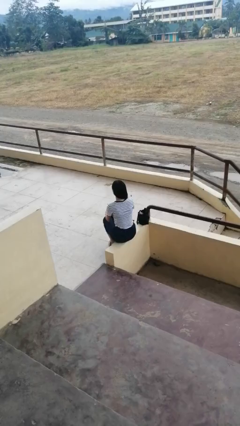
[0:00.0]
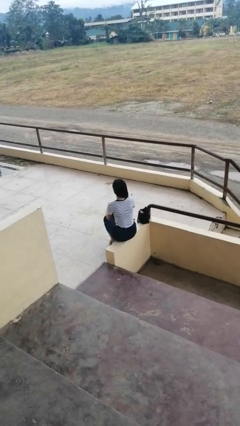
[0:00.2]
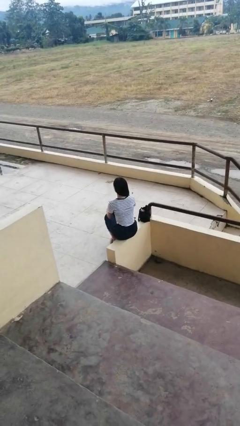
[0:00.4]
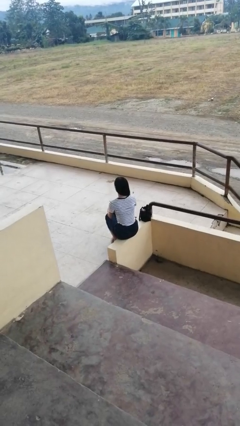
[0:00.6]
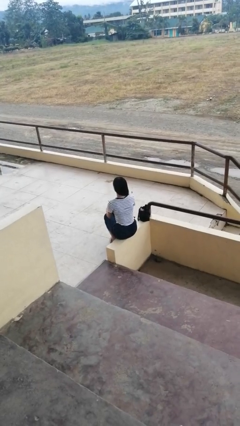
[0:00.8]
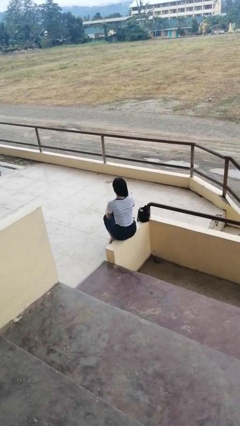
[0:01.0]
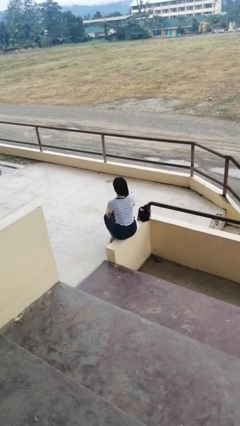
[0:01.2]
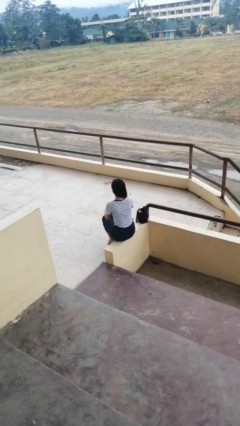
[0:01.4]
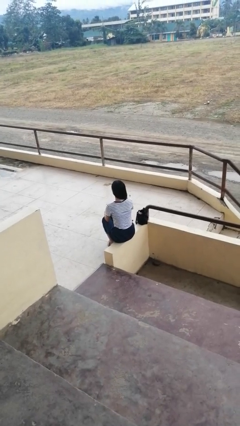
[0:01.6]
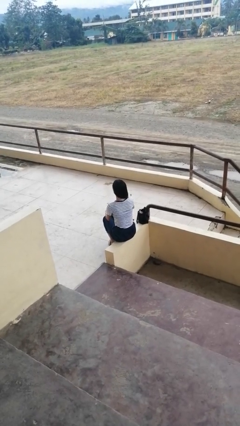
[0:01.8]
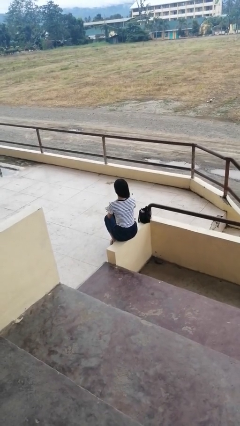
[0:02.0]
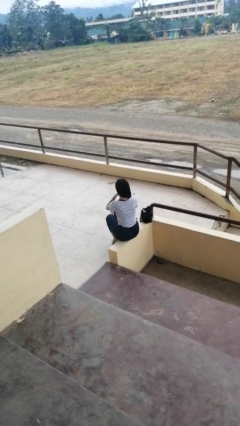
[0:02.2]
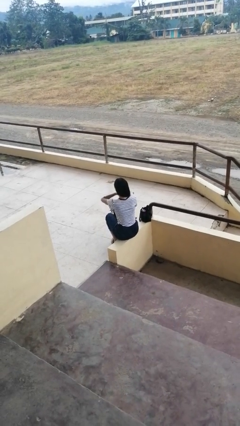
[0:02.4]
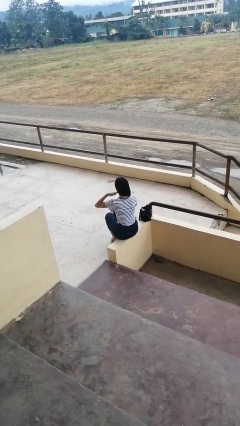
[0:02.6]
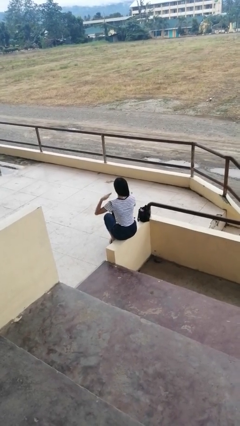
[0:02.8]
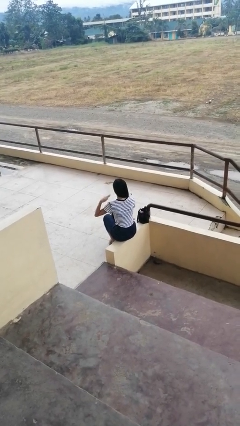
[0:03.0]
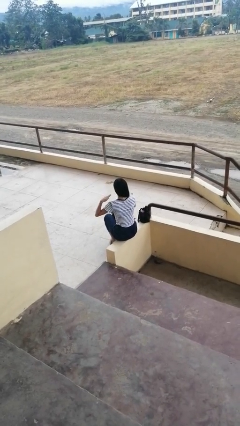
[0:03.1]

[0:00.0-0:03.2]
person gestures cut

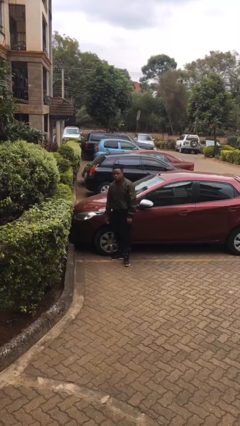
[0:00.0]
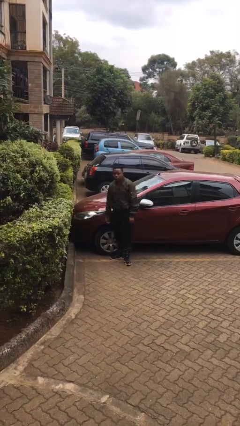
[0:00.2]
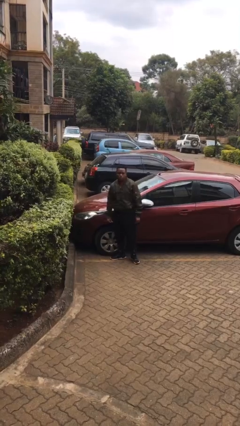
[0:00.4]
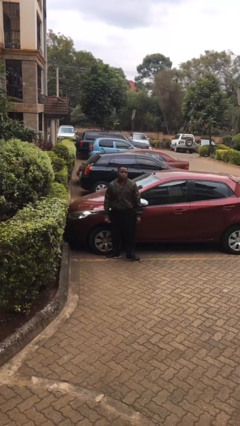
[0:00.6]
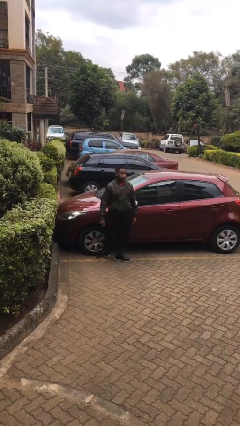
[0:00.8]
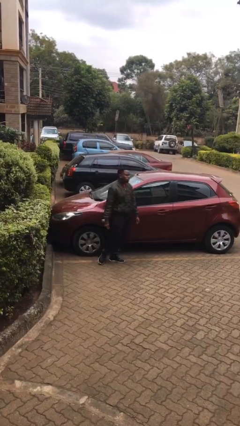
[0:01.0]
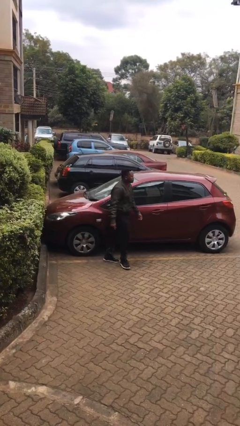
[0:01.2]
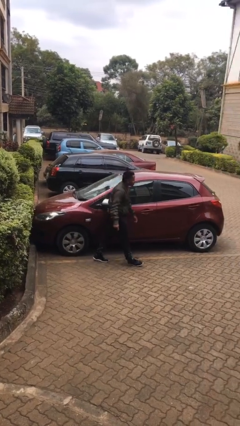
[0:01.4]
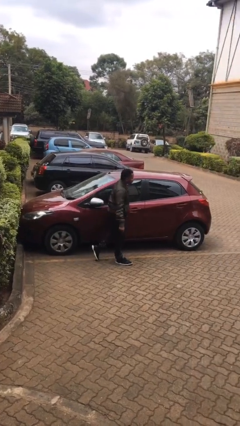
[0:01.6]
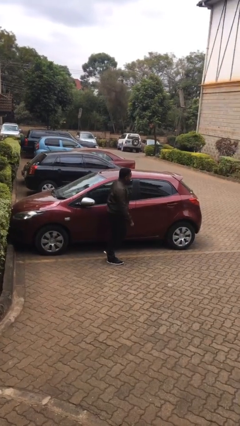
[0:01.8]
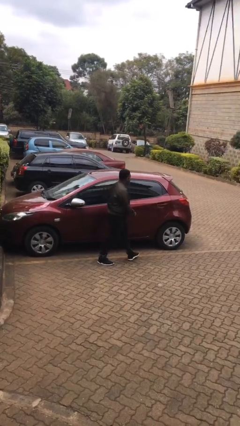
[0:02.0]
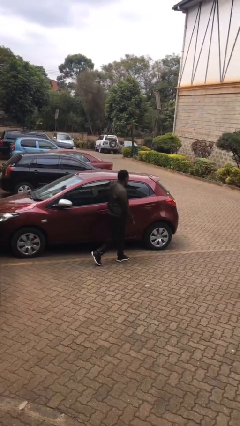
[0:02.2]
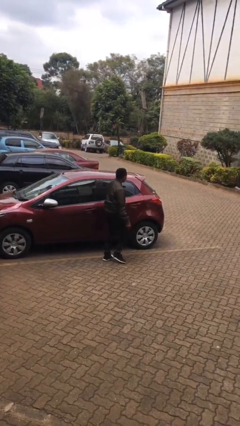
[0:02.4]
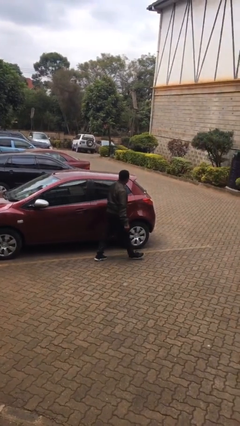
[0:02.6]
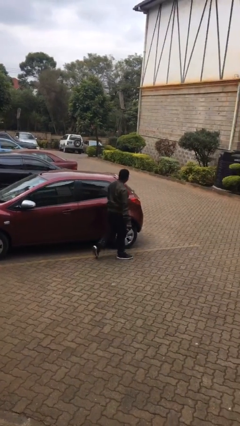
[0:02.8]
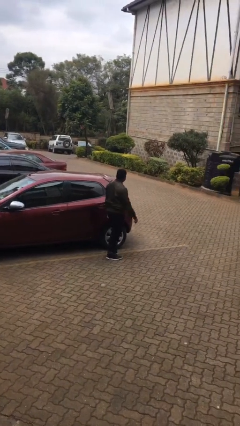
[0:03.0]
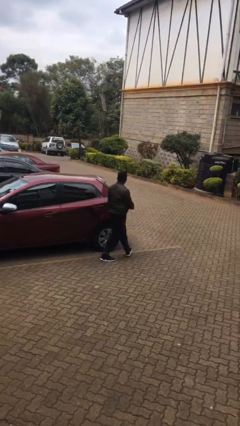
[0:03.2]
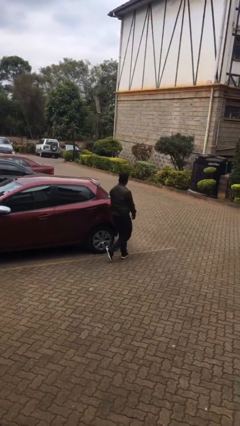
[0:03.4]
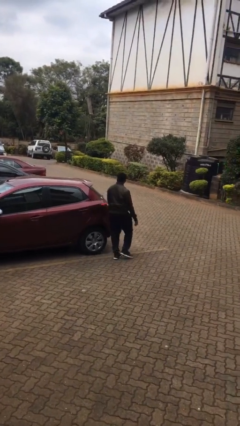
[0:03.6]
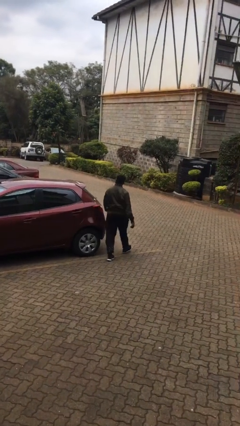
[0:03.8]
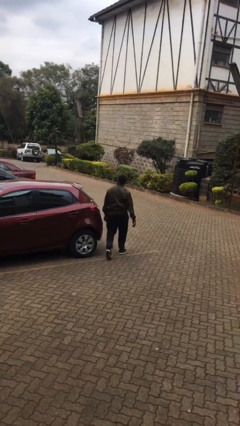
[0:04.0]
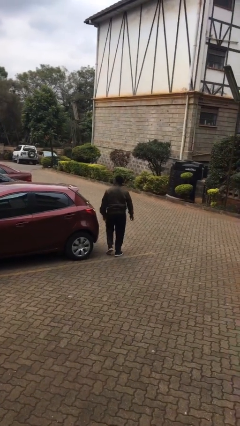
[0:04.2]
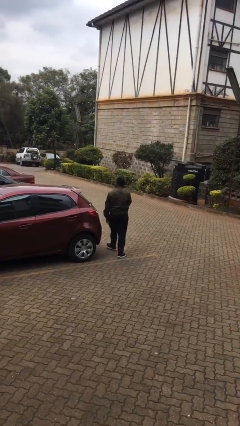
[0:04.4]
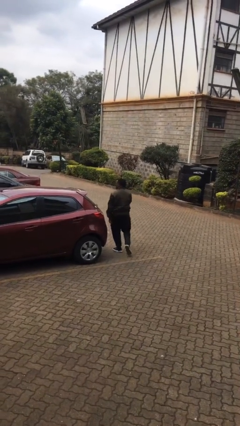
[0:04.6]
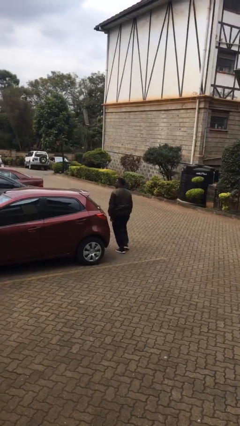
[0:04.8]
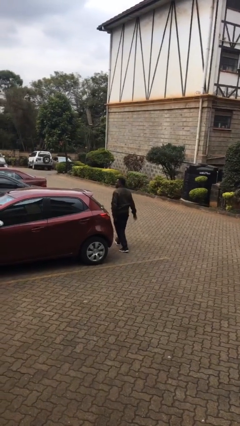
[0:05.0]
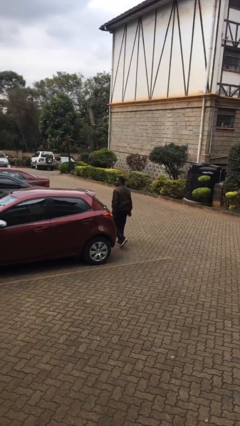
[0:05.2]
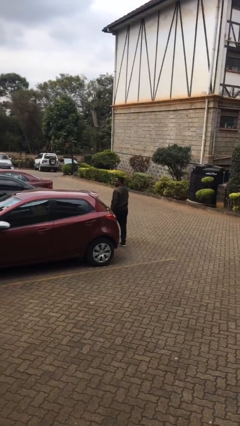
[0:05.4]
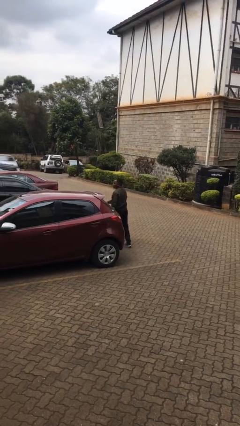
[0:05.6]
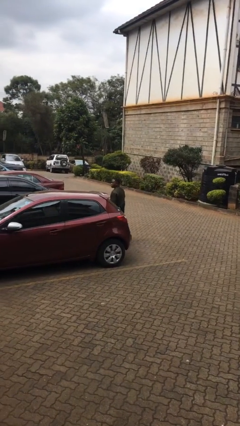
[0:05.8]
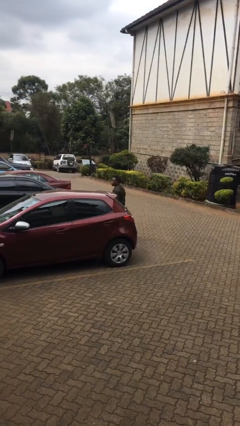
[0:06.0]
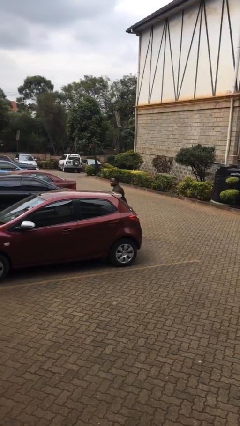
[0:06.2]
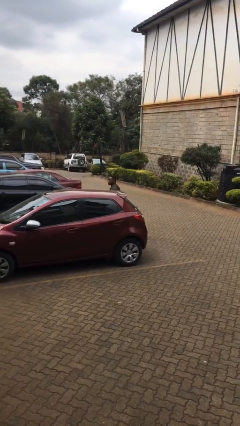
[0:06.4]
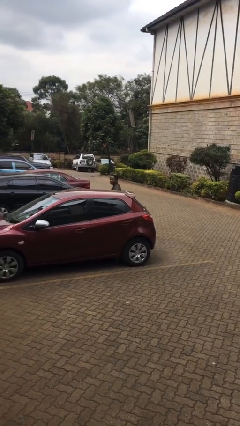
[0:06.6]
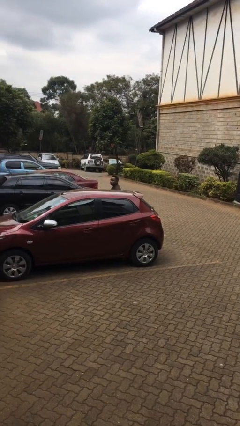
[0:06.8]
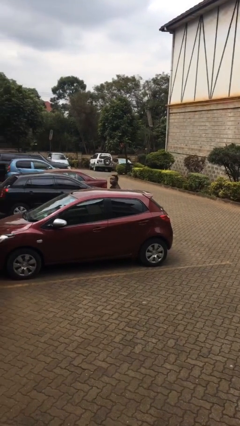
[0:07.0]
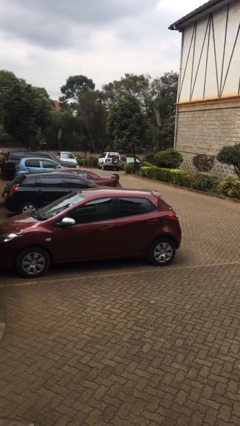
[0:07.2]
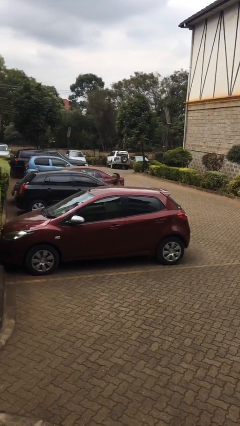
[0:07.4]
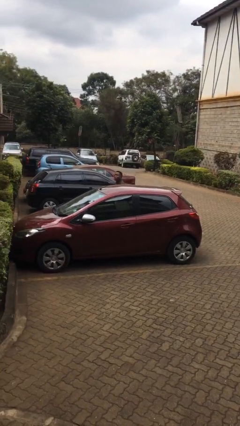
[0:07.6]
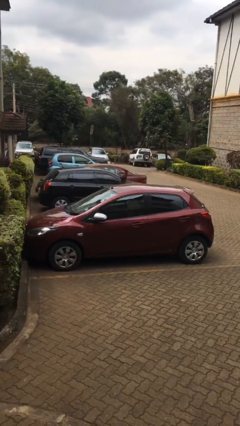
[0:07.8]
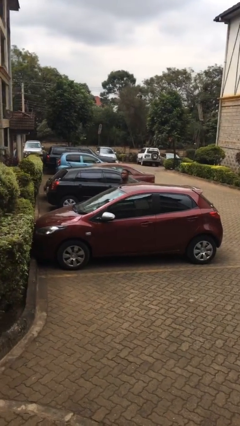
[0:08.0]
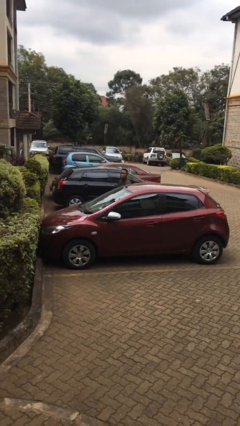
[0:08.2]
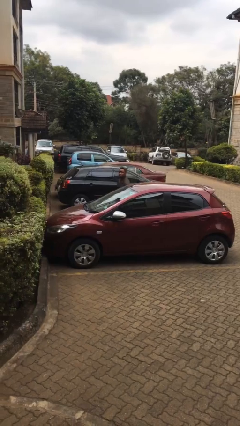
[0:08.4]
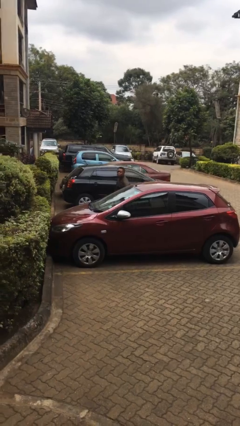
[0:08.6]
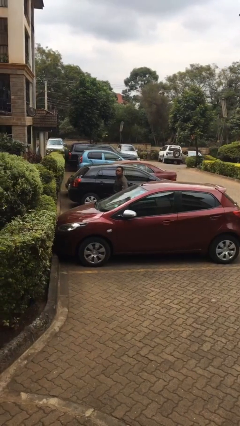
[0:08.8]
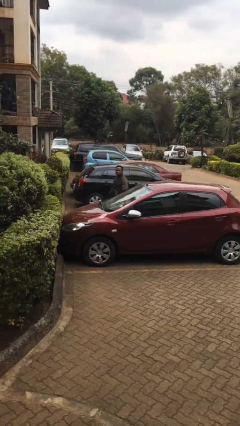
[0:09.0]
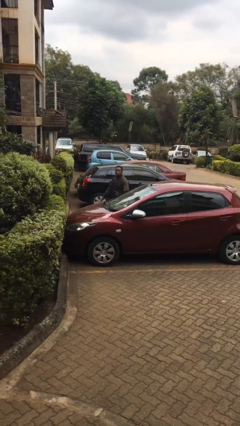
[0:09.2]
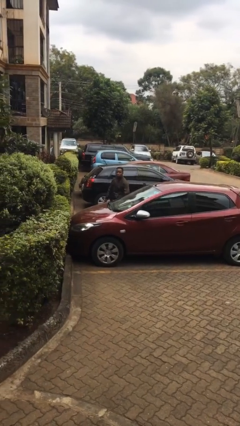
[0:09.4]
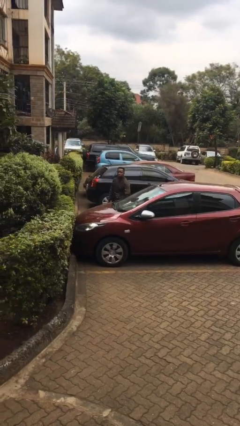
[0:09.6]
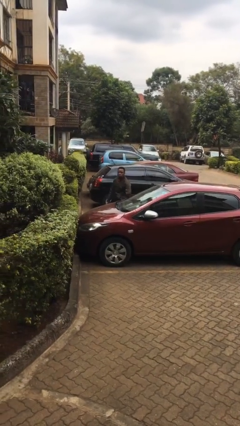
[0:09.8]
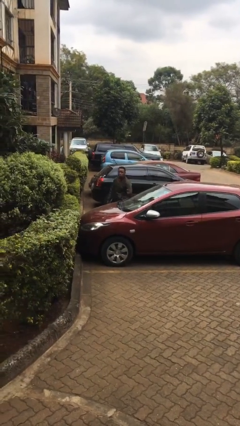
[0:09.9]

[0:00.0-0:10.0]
person walks around car

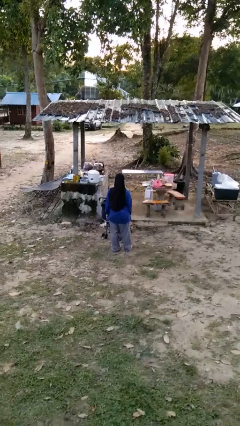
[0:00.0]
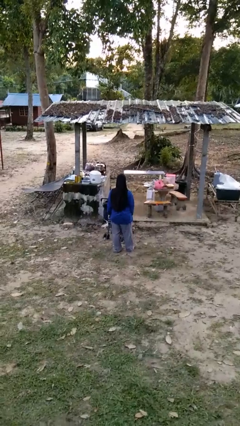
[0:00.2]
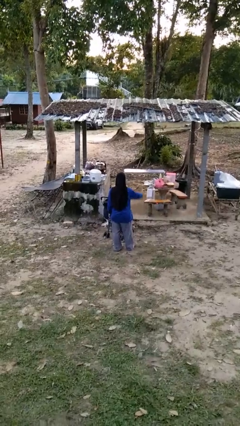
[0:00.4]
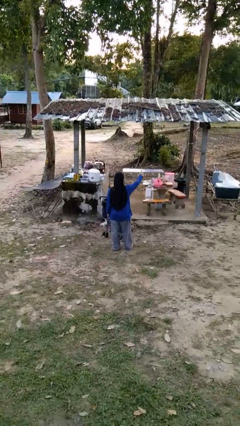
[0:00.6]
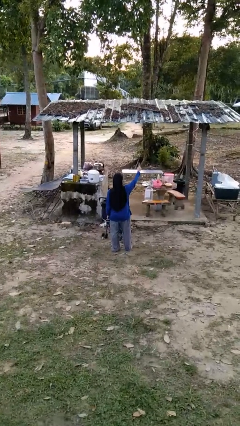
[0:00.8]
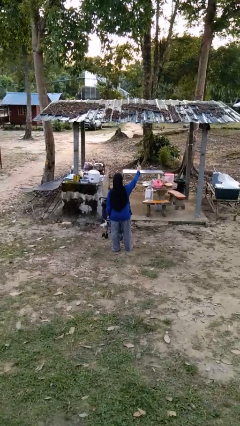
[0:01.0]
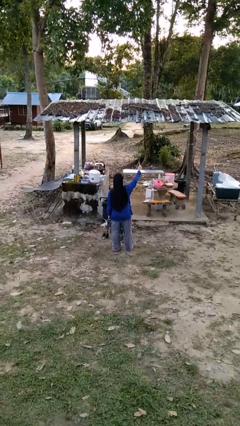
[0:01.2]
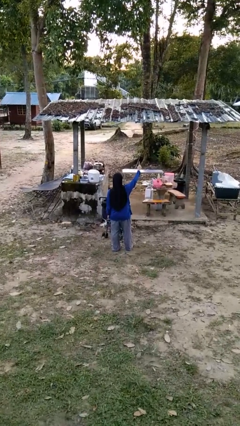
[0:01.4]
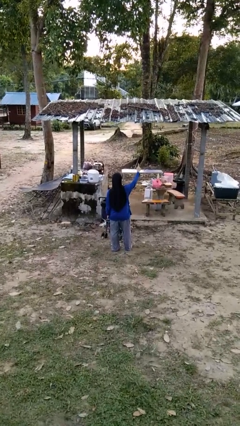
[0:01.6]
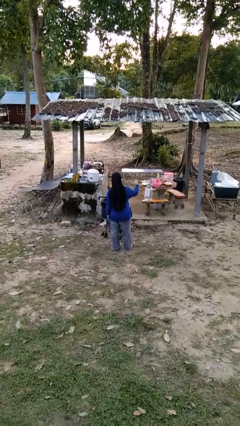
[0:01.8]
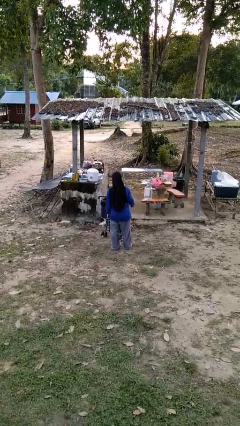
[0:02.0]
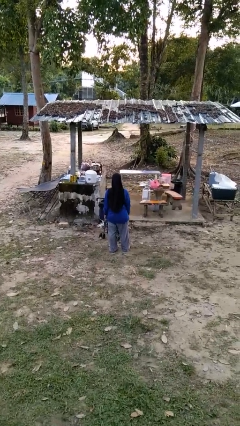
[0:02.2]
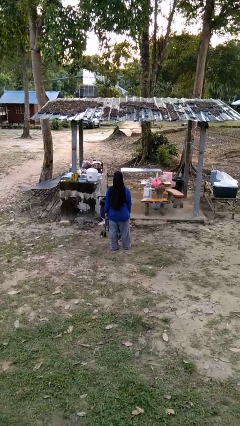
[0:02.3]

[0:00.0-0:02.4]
person gestures number one

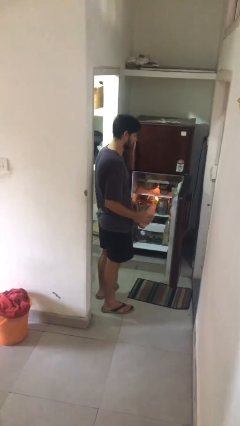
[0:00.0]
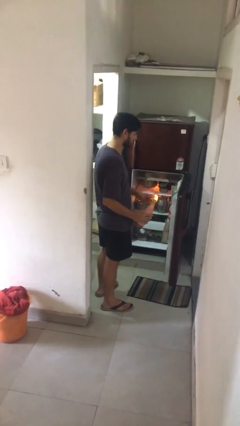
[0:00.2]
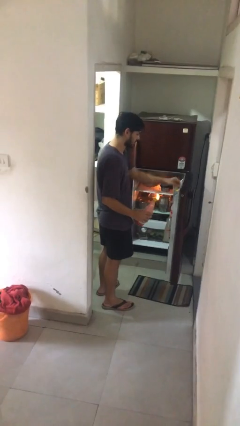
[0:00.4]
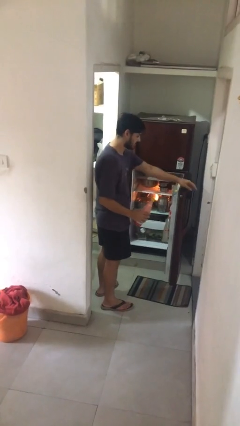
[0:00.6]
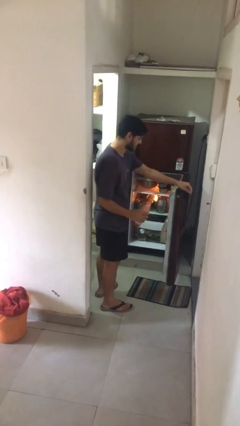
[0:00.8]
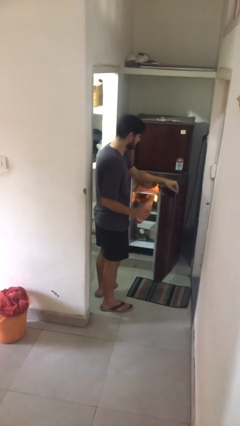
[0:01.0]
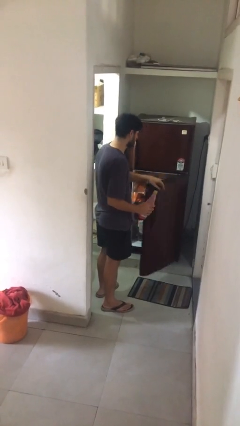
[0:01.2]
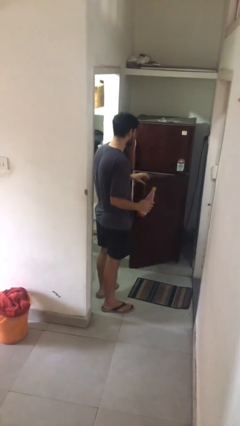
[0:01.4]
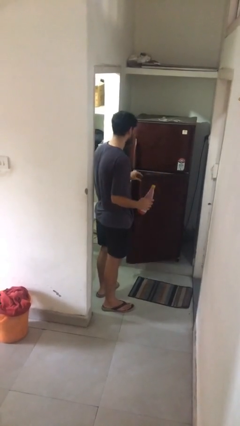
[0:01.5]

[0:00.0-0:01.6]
person closes refrigerator

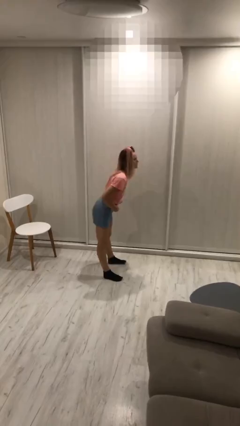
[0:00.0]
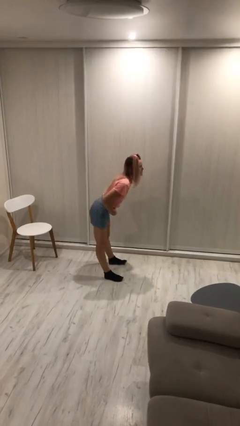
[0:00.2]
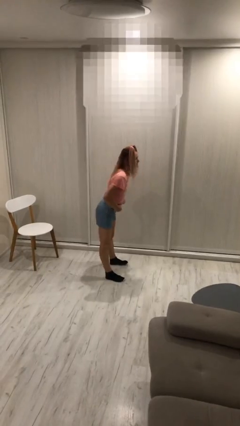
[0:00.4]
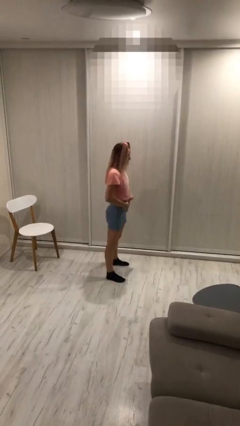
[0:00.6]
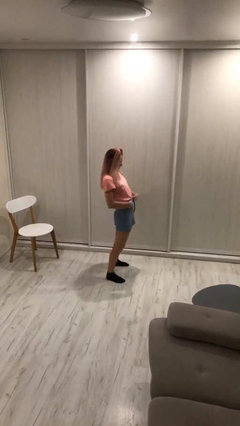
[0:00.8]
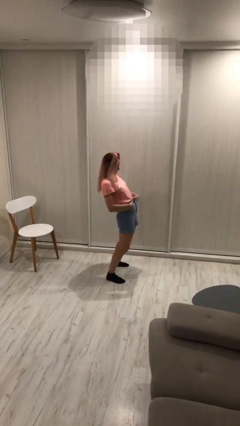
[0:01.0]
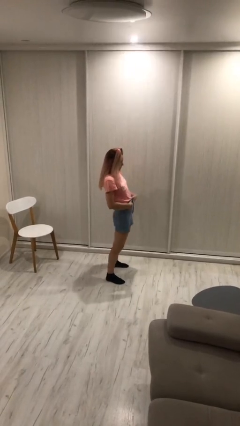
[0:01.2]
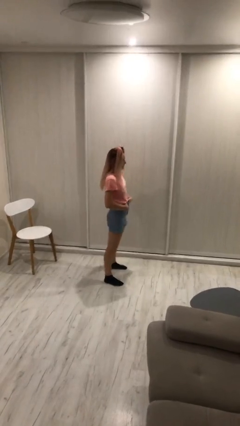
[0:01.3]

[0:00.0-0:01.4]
person wiggles hips
